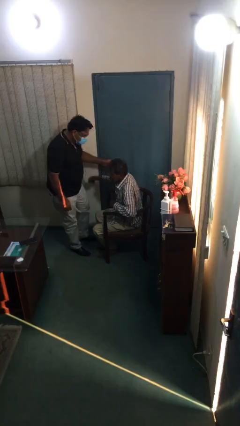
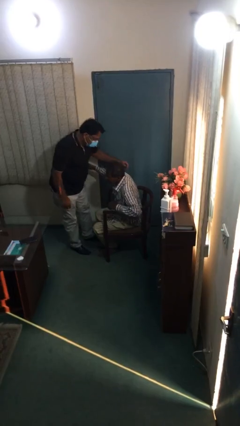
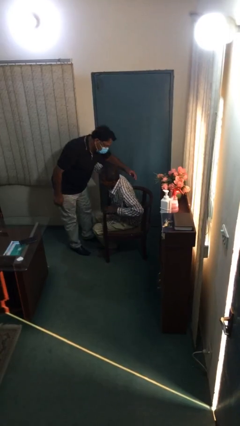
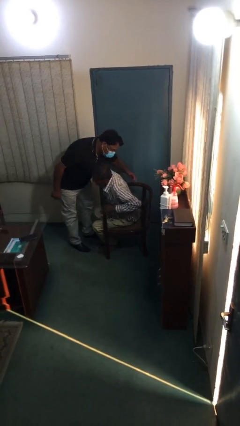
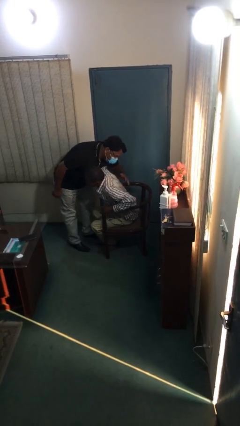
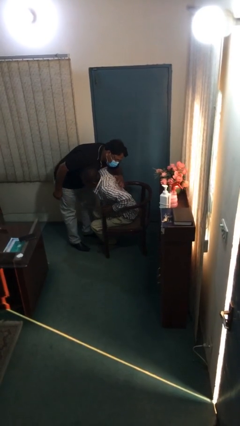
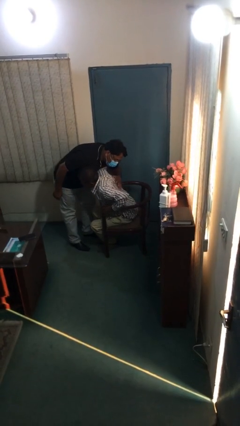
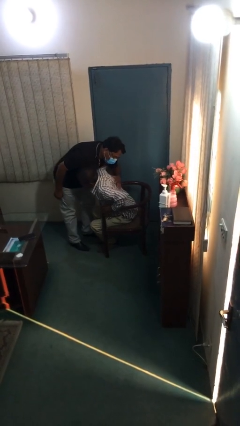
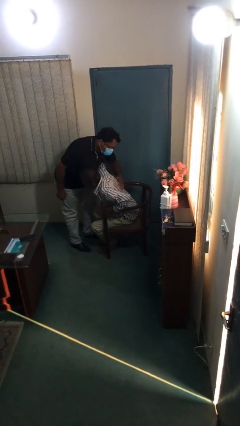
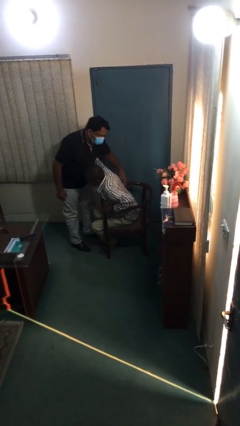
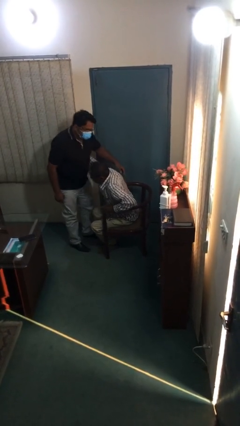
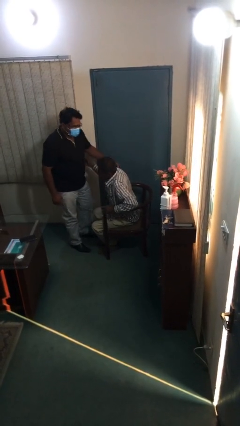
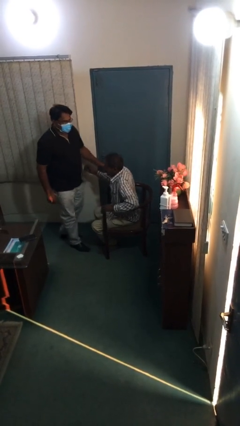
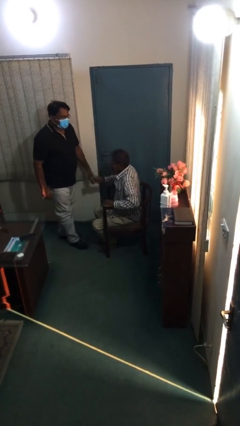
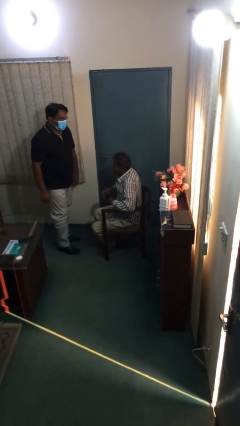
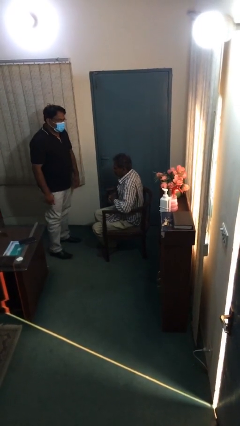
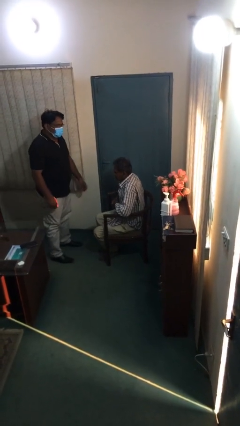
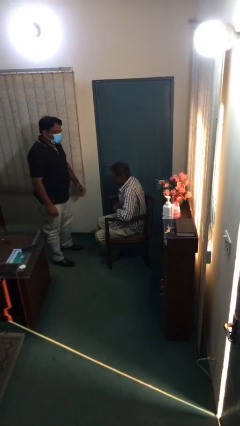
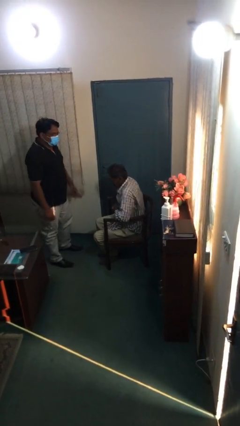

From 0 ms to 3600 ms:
person embraces person

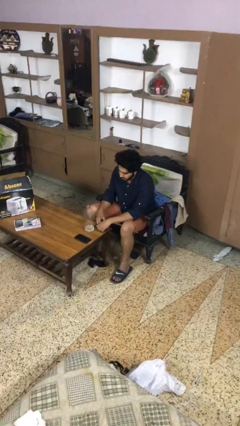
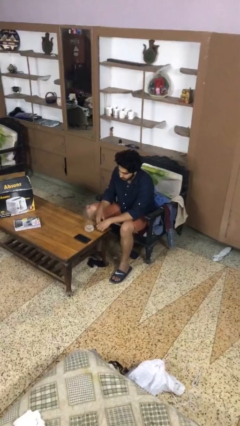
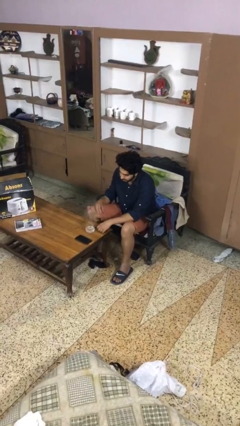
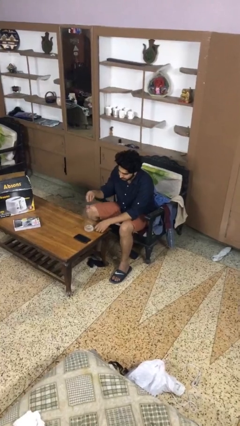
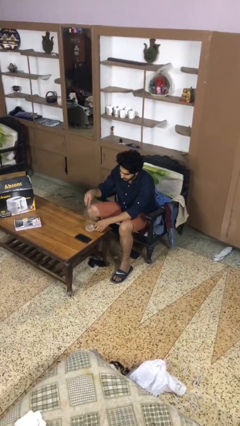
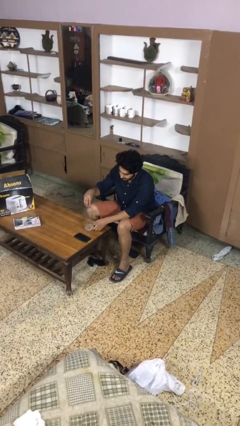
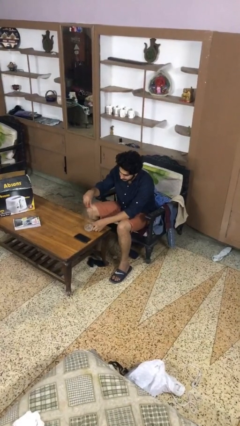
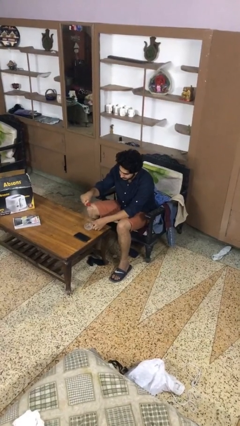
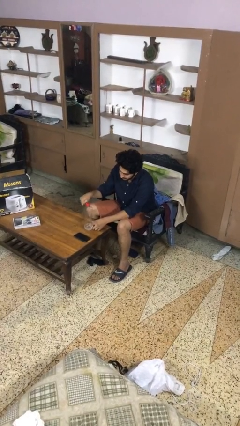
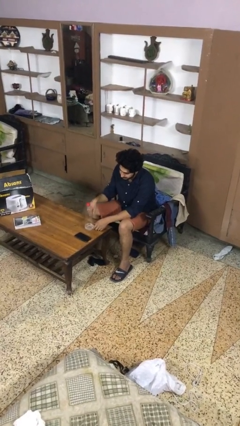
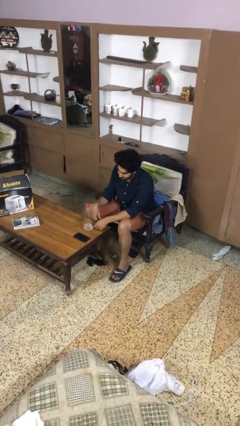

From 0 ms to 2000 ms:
person screws lid to bottle

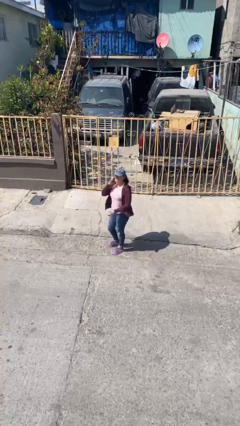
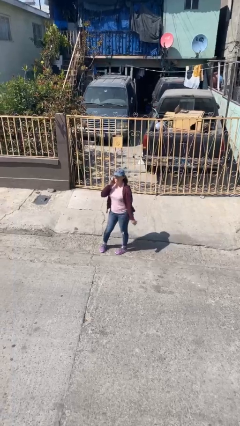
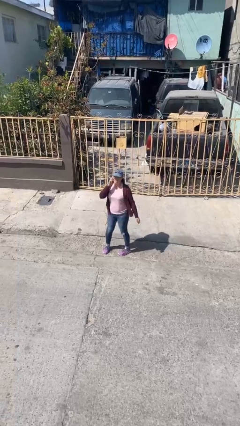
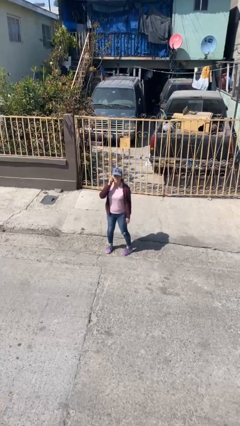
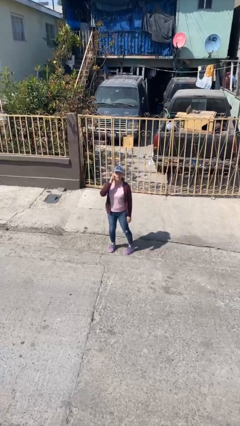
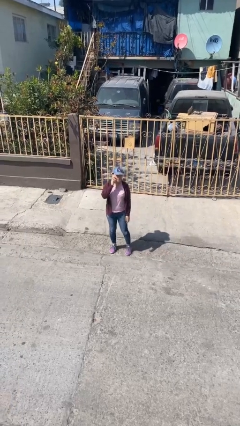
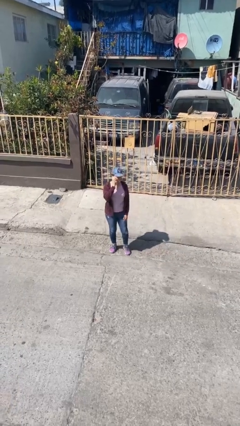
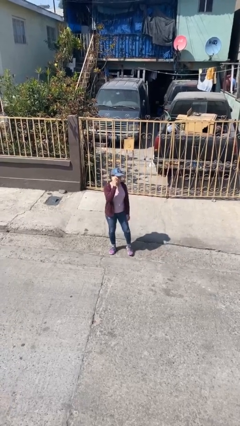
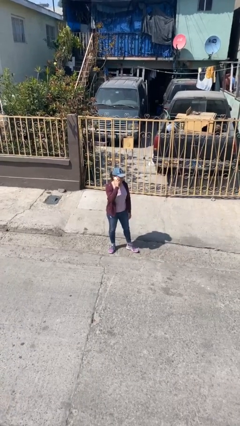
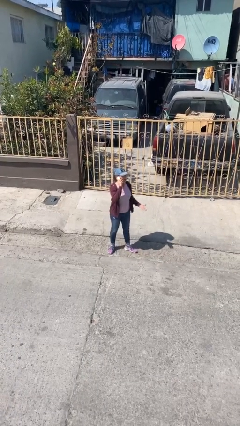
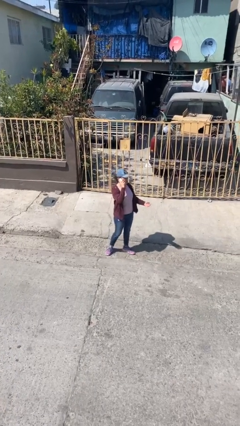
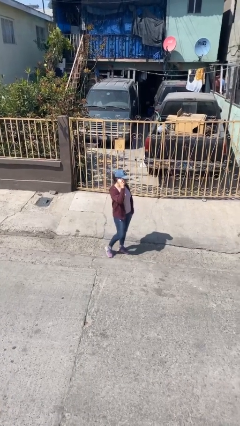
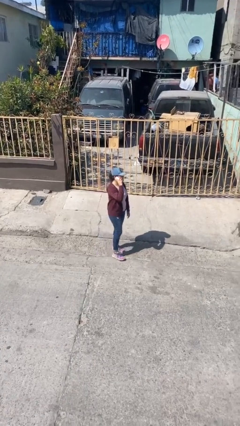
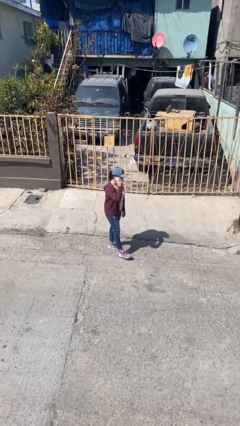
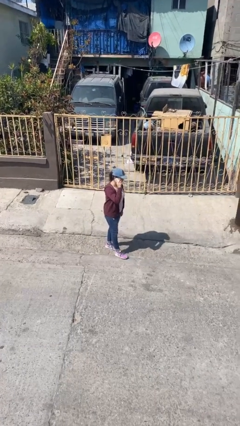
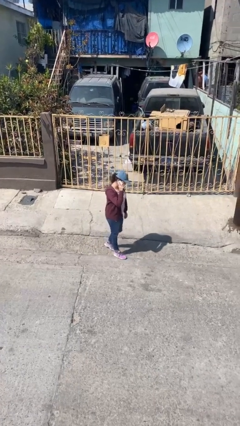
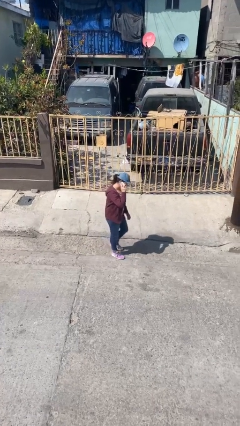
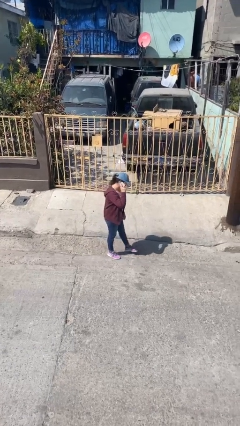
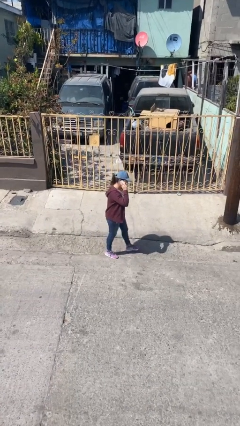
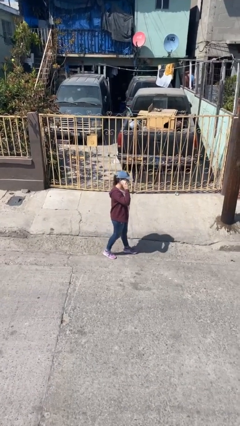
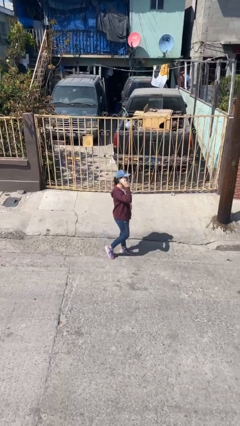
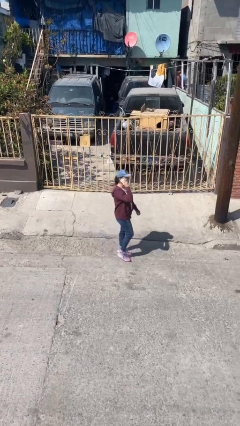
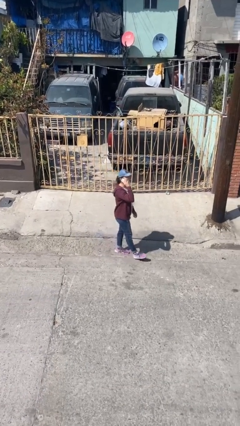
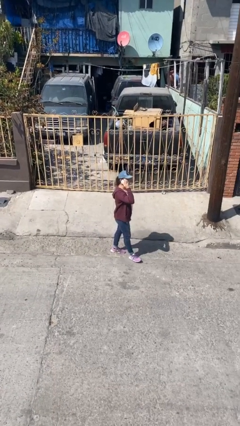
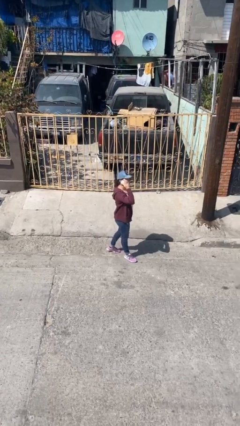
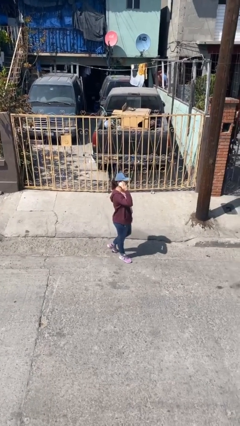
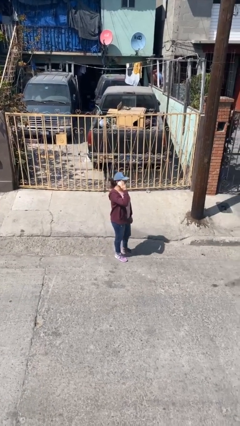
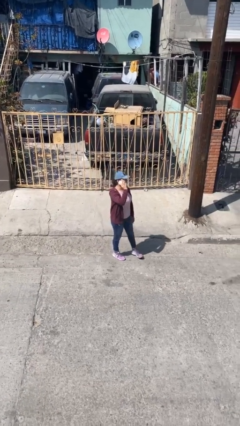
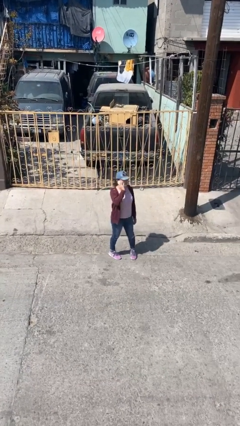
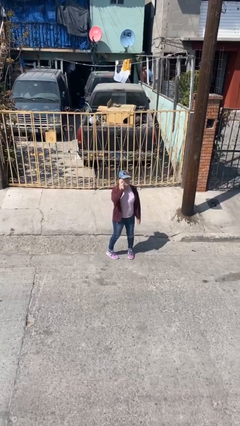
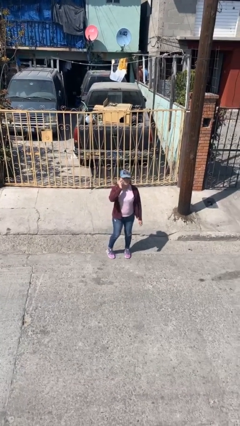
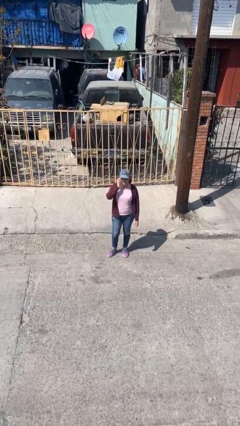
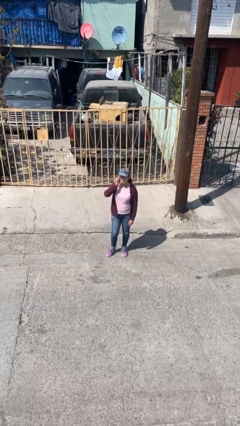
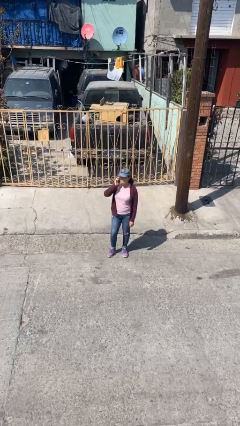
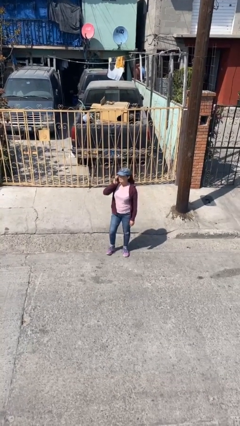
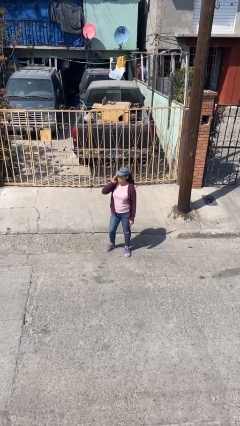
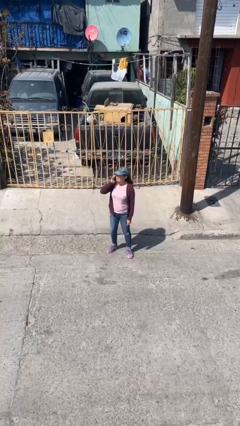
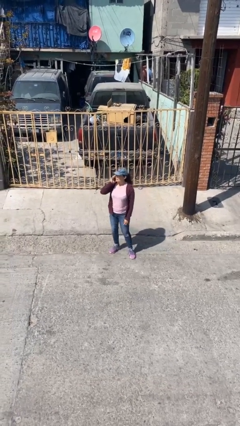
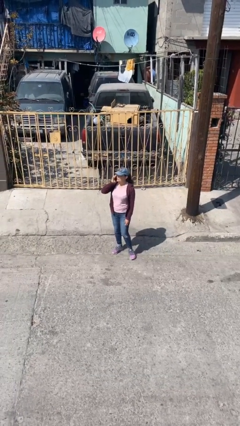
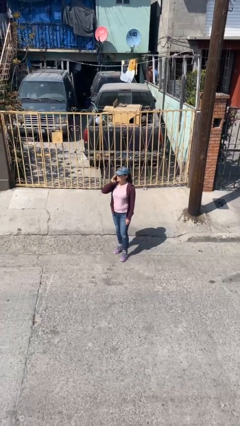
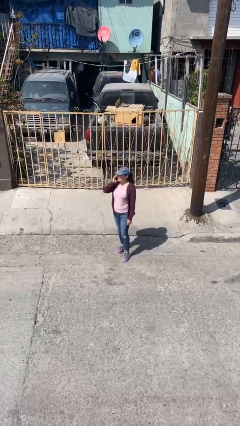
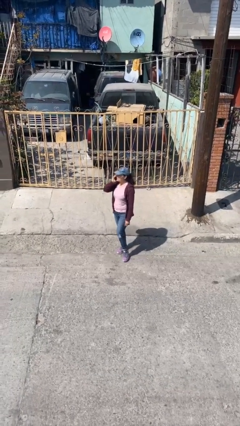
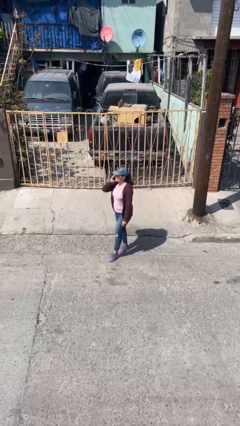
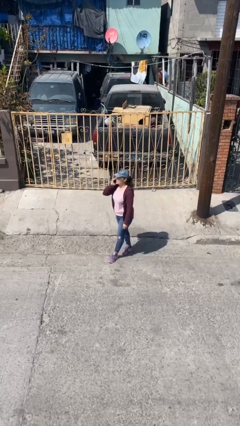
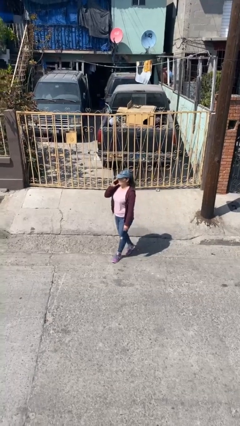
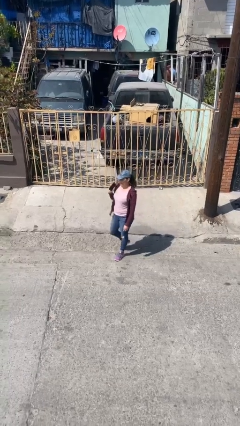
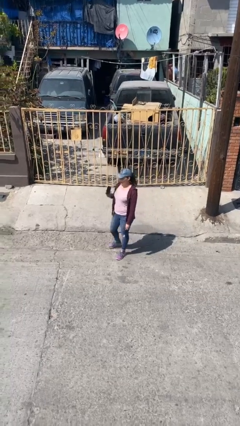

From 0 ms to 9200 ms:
person talks on phone

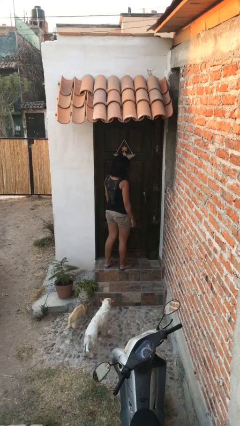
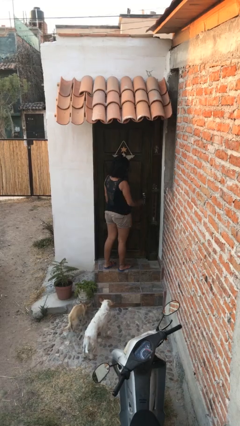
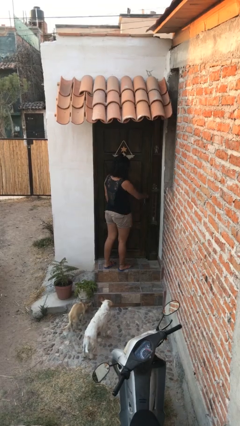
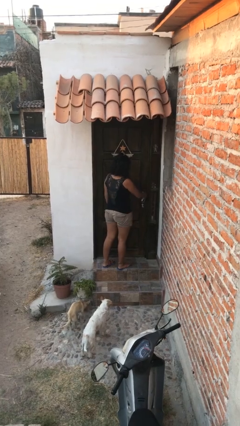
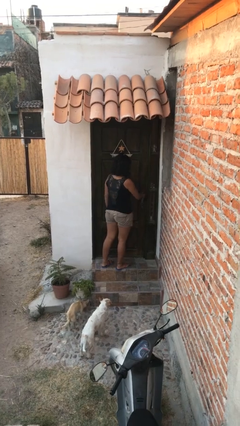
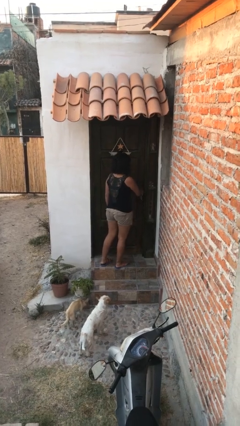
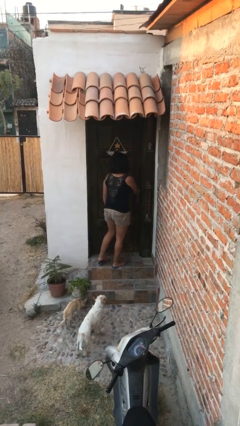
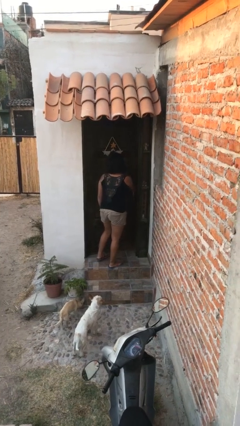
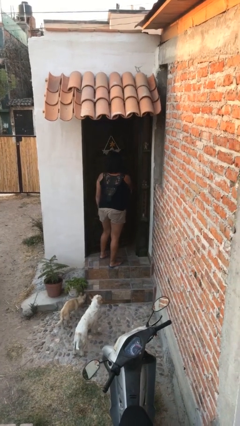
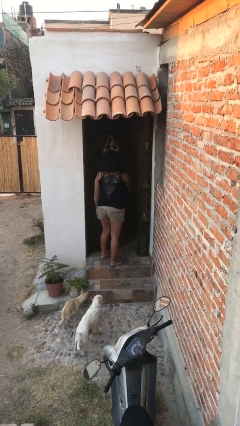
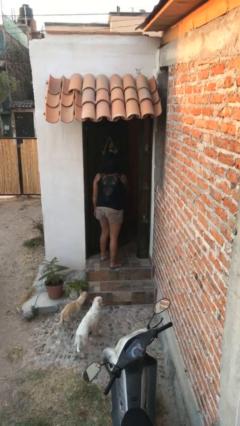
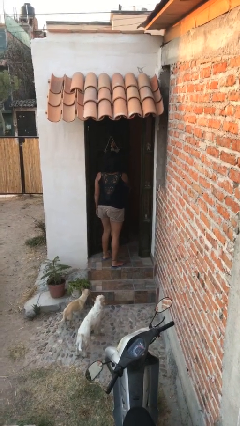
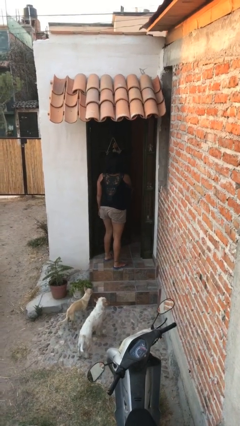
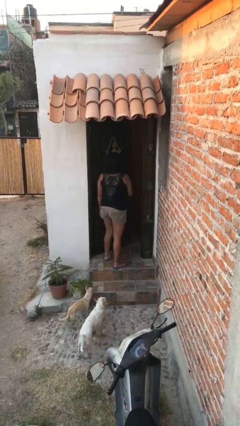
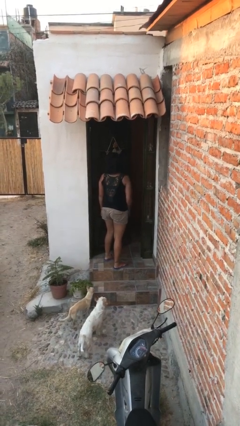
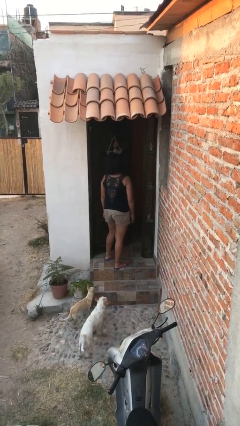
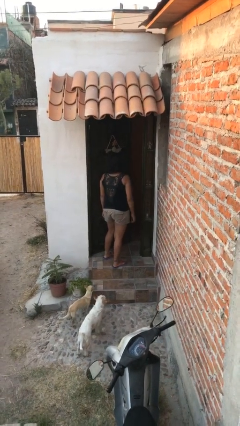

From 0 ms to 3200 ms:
person opens facility door
